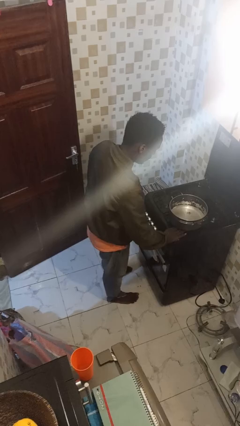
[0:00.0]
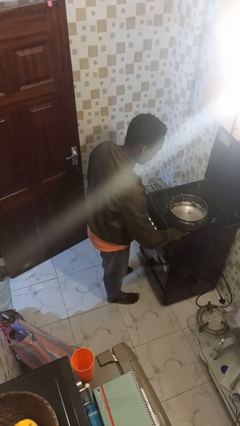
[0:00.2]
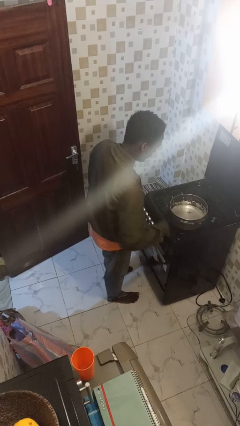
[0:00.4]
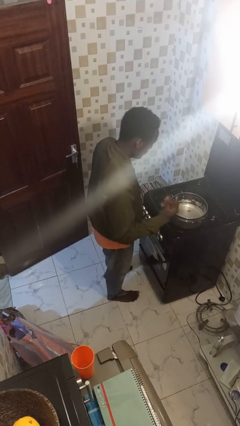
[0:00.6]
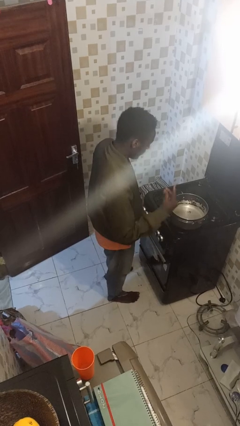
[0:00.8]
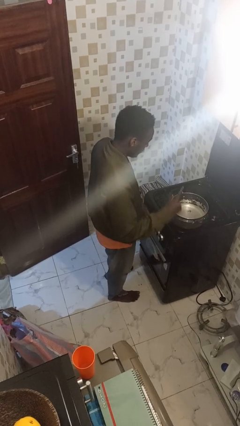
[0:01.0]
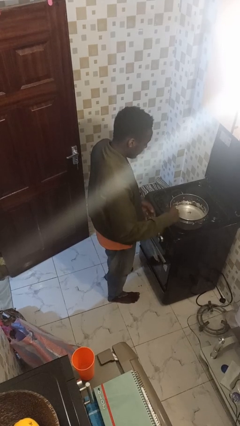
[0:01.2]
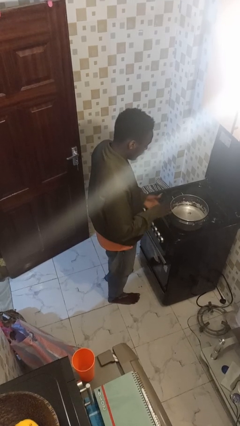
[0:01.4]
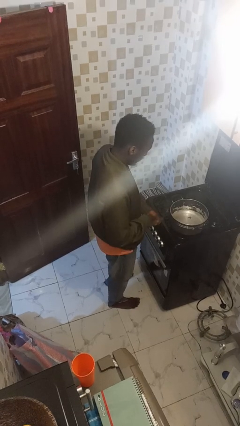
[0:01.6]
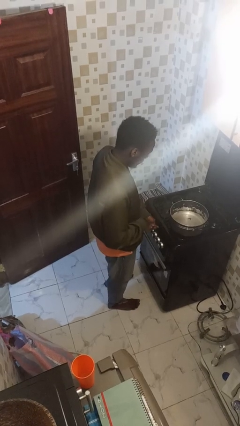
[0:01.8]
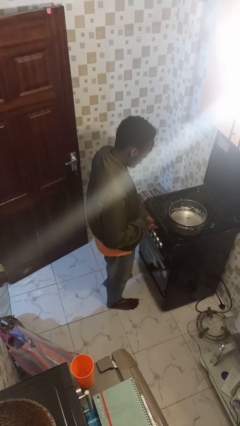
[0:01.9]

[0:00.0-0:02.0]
person burns hand

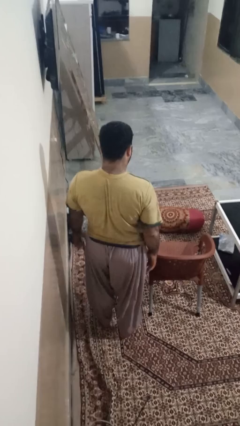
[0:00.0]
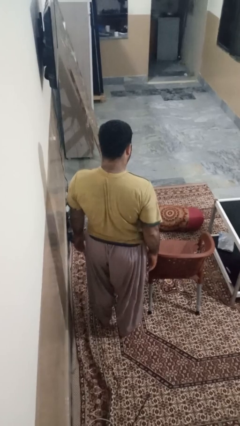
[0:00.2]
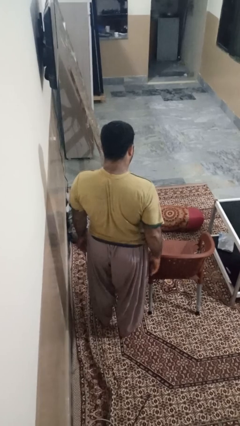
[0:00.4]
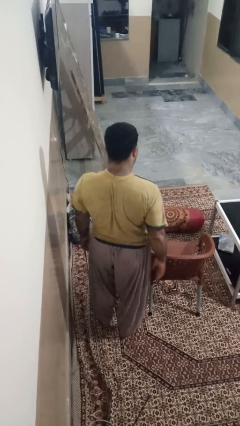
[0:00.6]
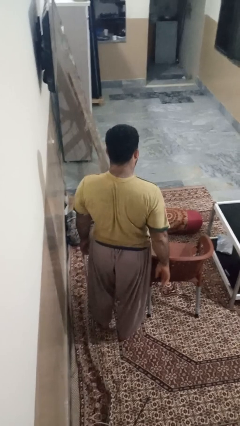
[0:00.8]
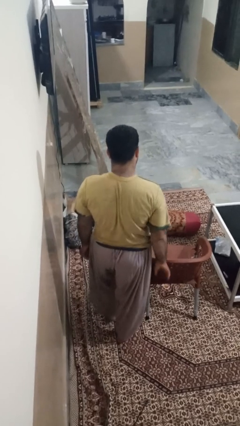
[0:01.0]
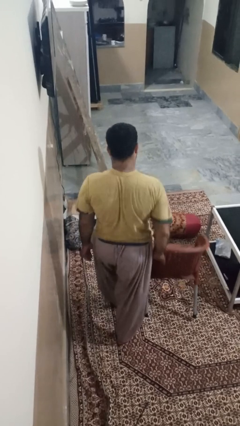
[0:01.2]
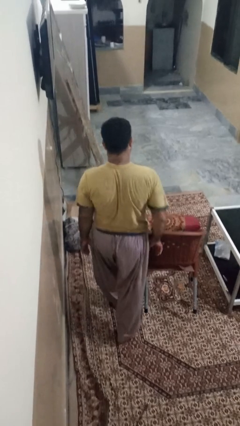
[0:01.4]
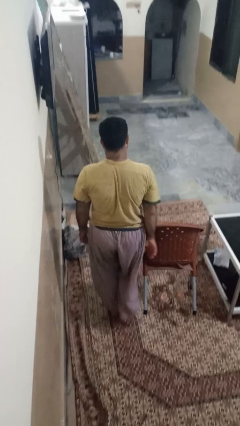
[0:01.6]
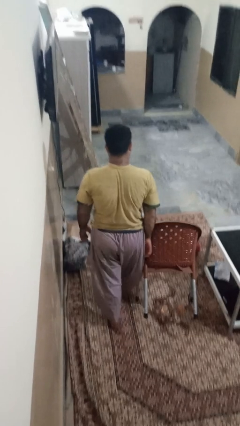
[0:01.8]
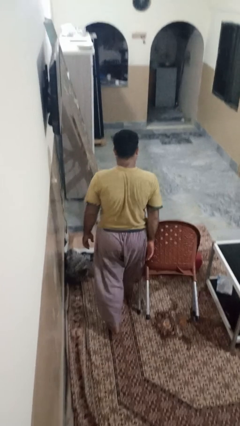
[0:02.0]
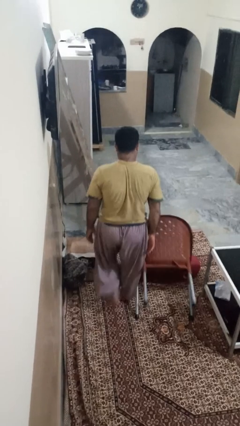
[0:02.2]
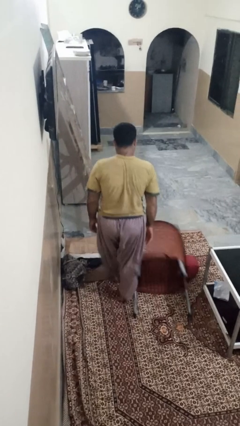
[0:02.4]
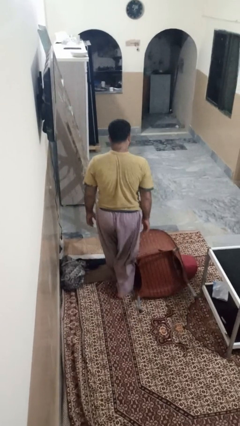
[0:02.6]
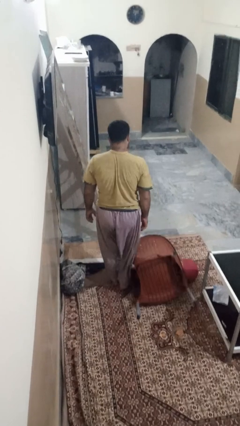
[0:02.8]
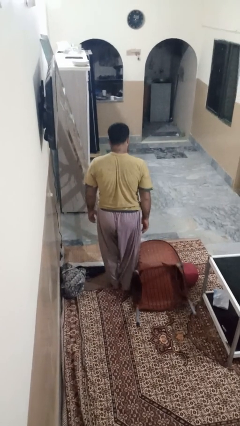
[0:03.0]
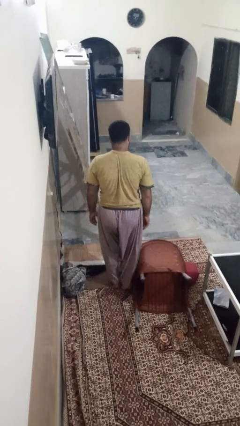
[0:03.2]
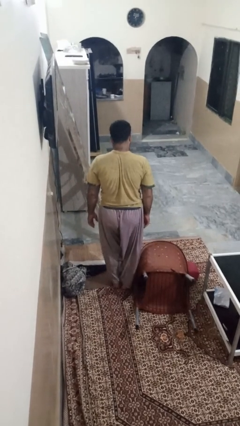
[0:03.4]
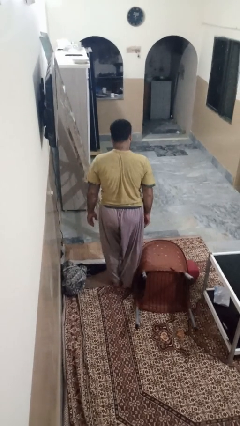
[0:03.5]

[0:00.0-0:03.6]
person knocks over furniture

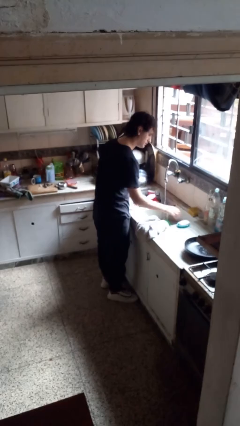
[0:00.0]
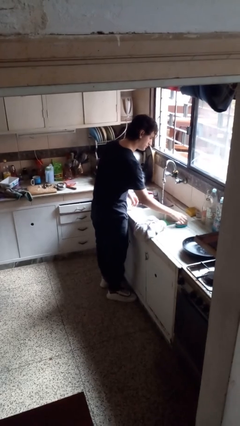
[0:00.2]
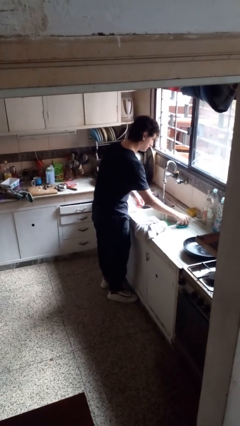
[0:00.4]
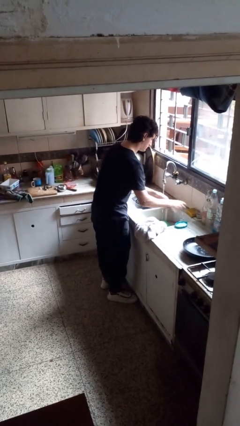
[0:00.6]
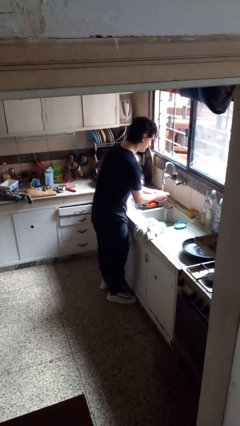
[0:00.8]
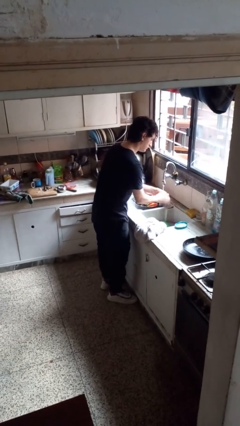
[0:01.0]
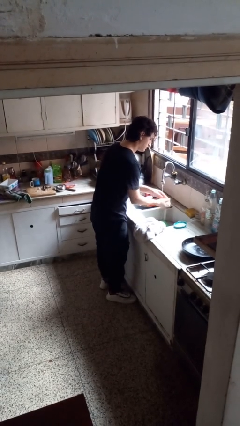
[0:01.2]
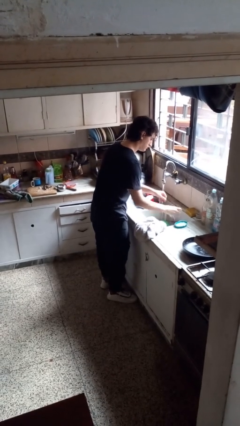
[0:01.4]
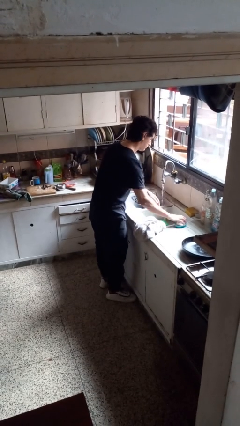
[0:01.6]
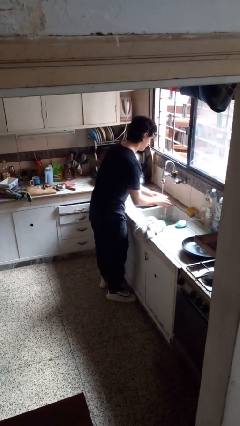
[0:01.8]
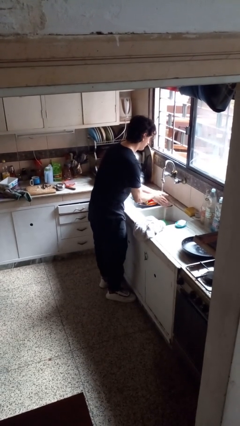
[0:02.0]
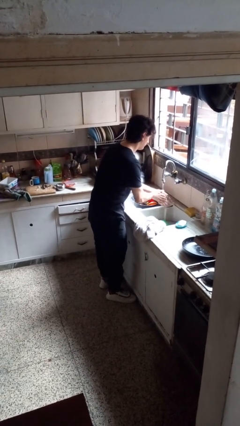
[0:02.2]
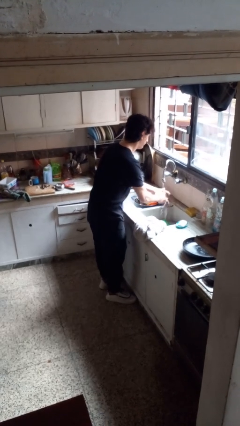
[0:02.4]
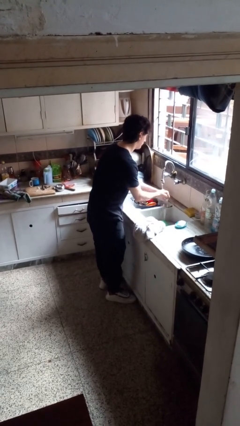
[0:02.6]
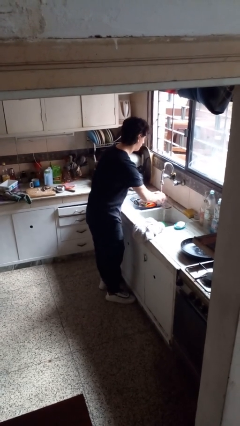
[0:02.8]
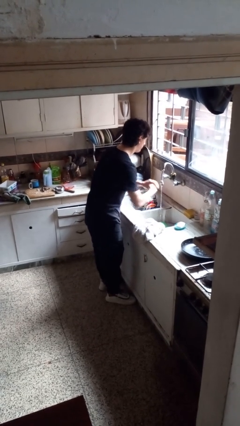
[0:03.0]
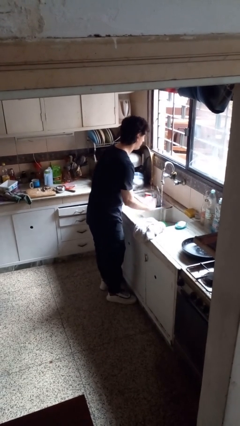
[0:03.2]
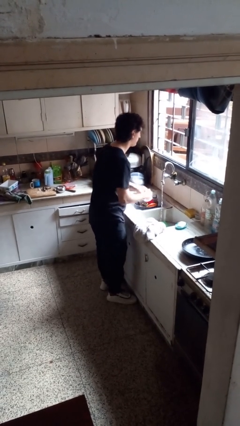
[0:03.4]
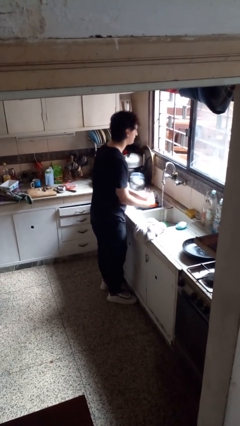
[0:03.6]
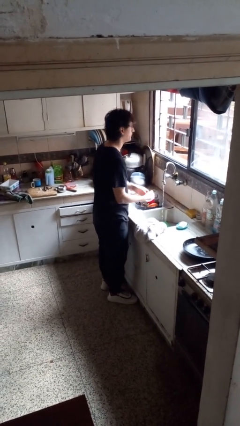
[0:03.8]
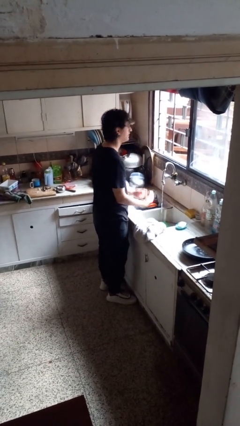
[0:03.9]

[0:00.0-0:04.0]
person washes hands

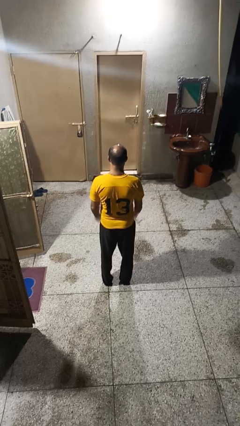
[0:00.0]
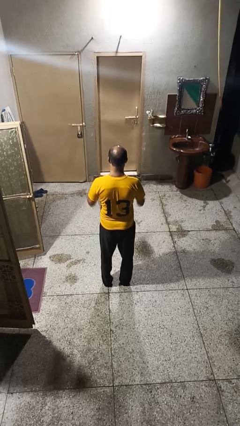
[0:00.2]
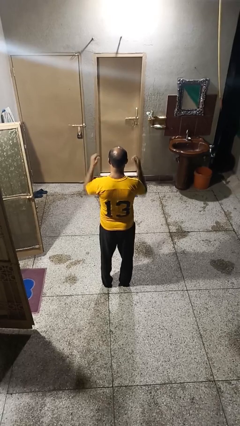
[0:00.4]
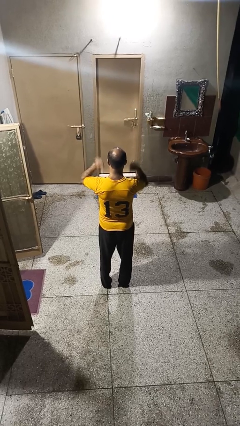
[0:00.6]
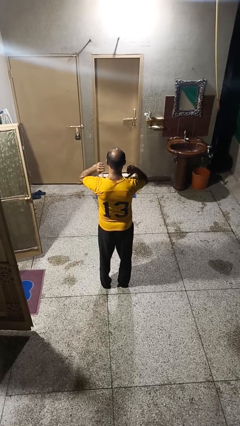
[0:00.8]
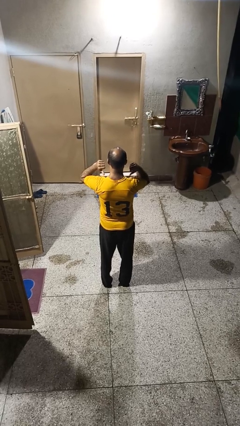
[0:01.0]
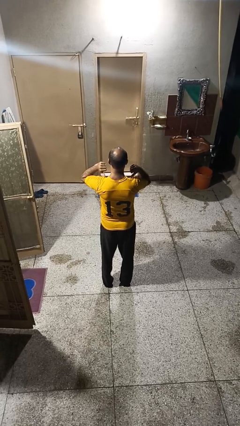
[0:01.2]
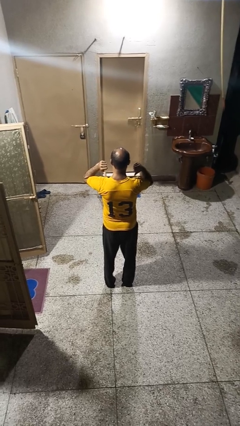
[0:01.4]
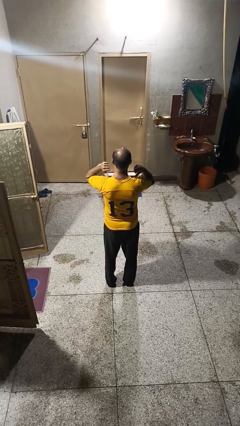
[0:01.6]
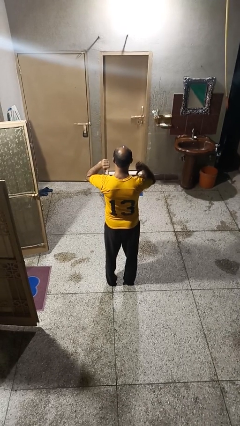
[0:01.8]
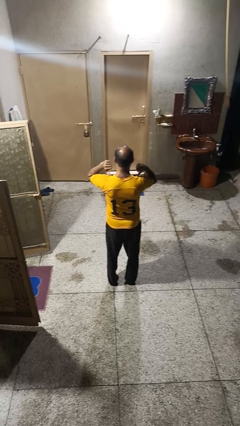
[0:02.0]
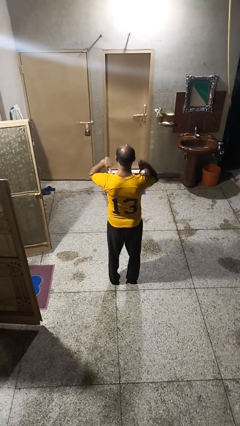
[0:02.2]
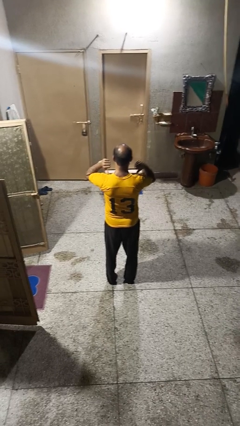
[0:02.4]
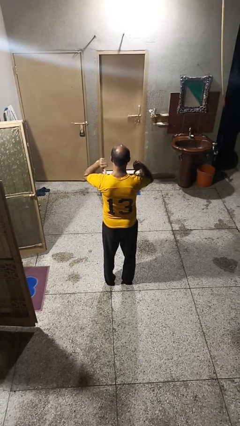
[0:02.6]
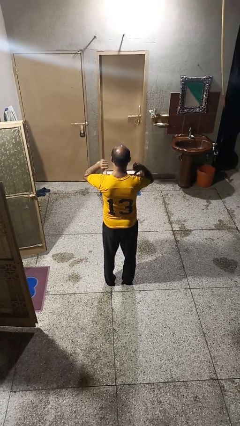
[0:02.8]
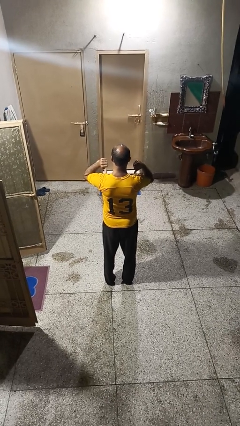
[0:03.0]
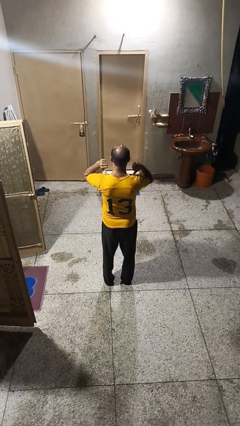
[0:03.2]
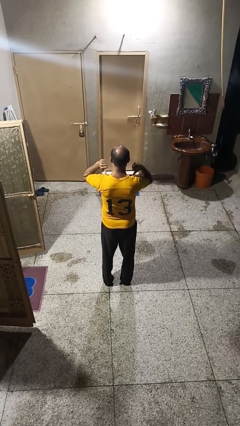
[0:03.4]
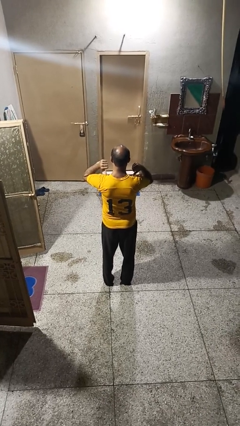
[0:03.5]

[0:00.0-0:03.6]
person gestures behind me

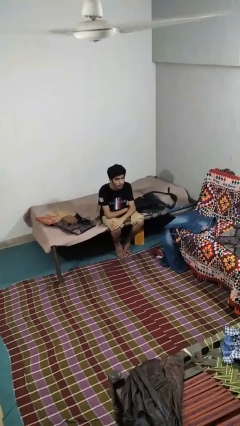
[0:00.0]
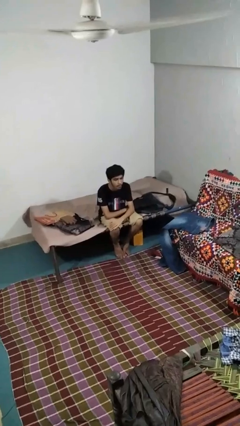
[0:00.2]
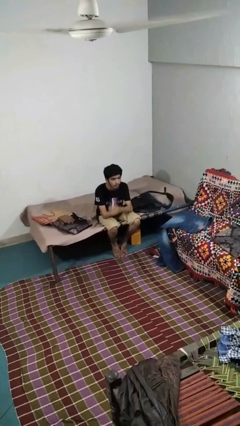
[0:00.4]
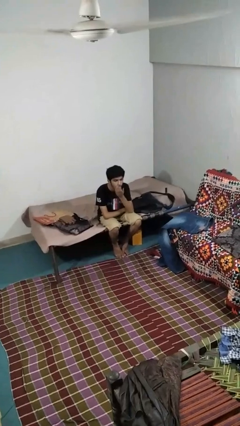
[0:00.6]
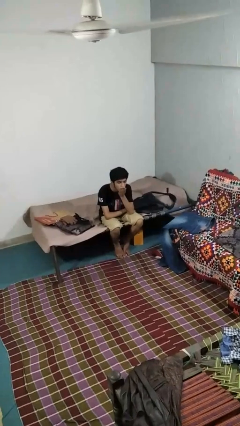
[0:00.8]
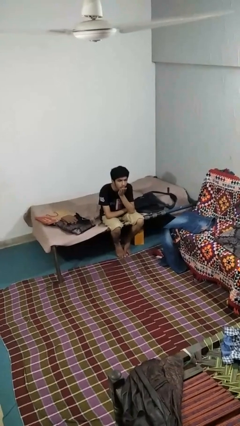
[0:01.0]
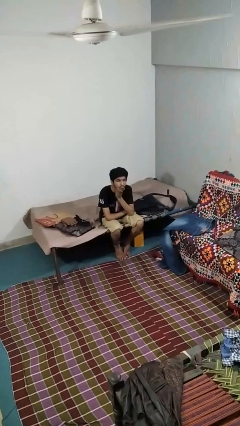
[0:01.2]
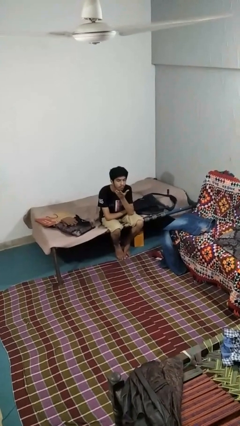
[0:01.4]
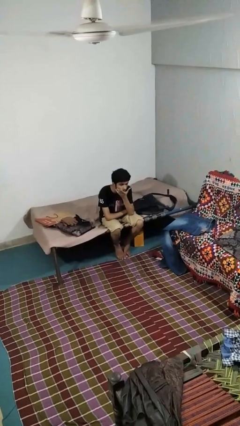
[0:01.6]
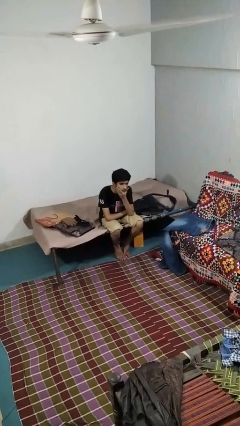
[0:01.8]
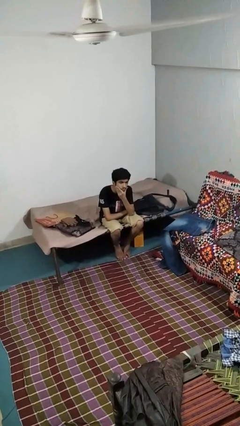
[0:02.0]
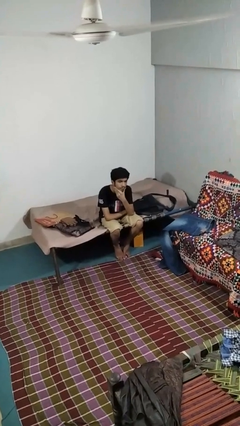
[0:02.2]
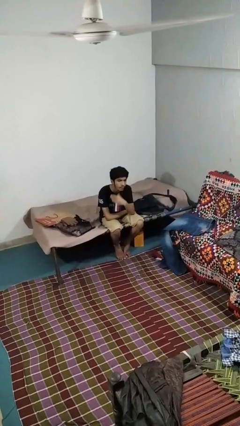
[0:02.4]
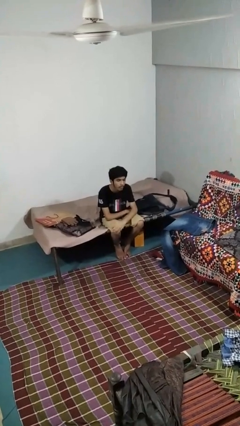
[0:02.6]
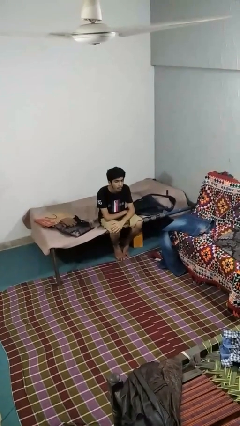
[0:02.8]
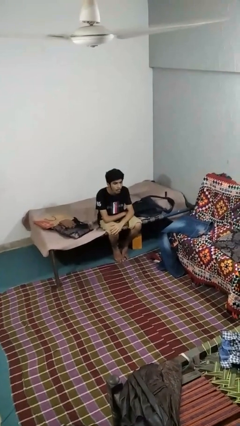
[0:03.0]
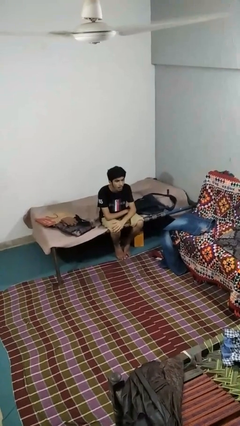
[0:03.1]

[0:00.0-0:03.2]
person strokes chin

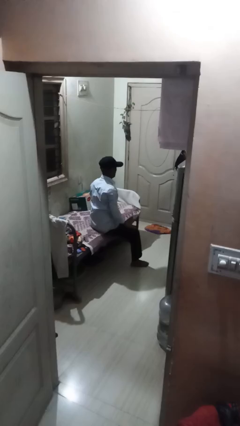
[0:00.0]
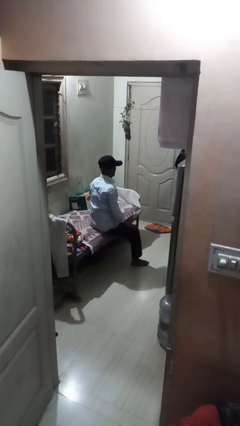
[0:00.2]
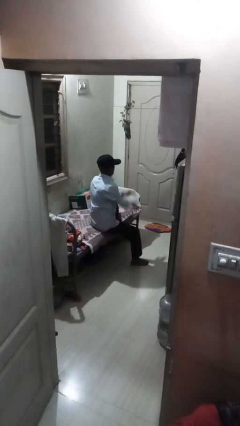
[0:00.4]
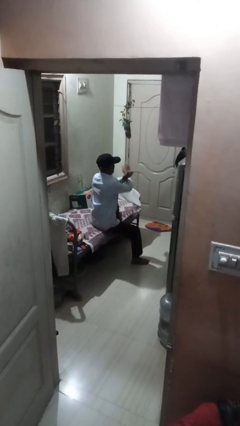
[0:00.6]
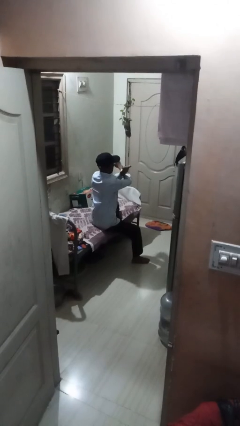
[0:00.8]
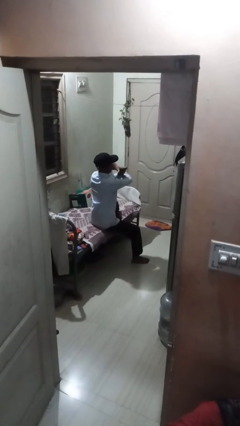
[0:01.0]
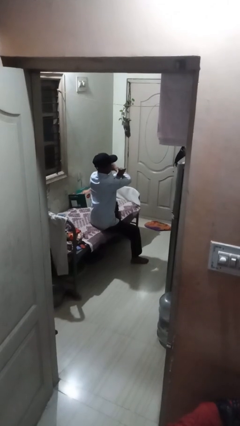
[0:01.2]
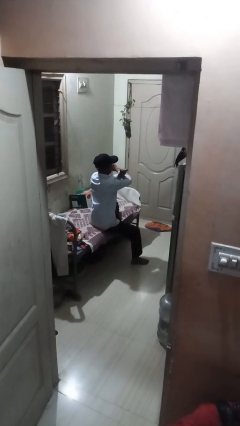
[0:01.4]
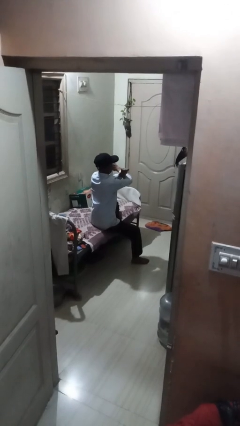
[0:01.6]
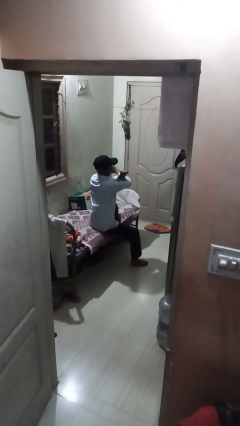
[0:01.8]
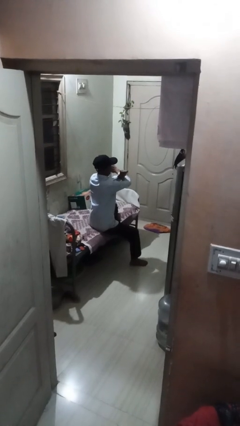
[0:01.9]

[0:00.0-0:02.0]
person gestures arms x
